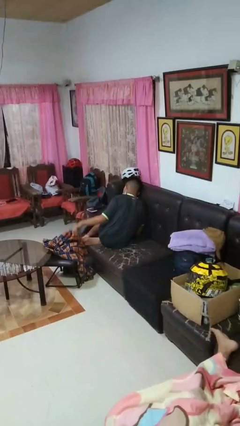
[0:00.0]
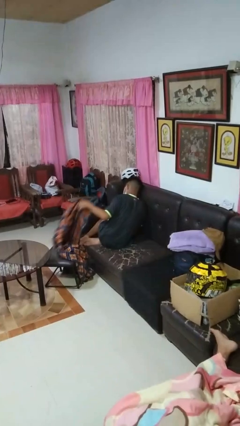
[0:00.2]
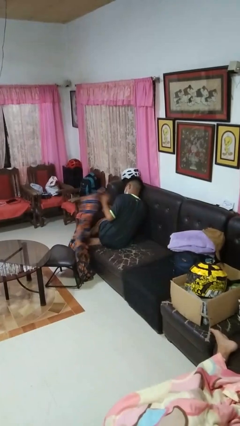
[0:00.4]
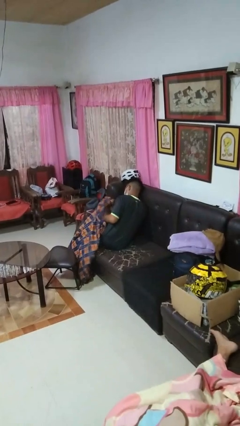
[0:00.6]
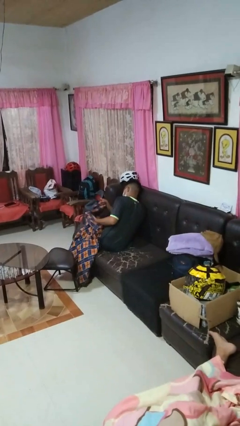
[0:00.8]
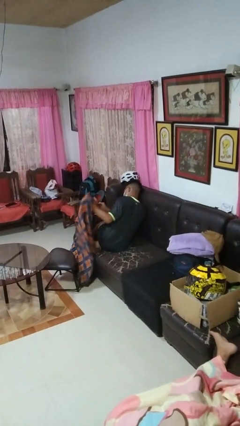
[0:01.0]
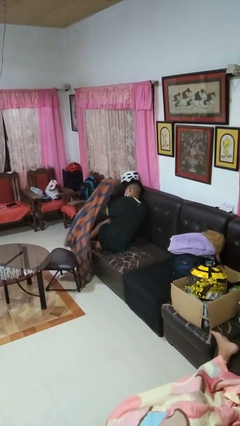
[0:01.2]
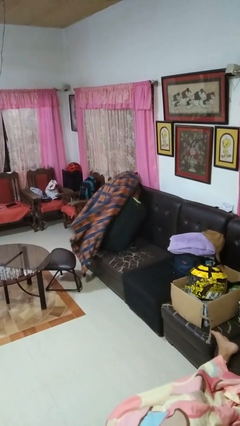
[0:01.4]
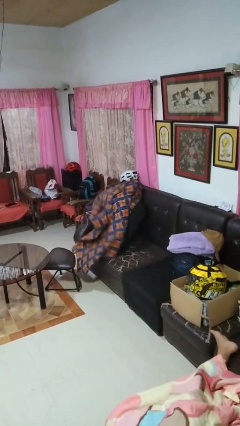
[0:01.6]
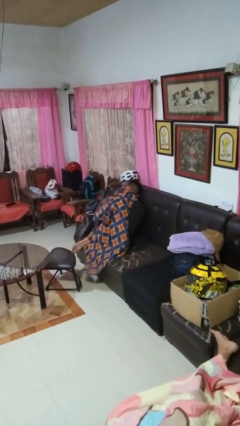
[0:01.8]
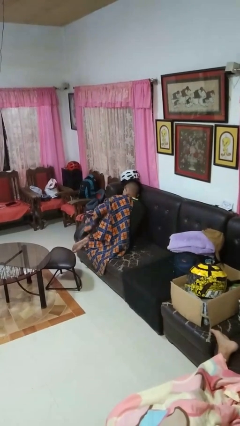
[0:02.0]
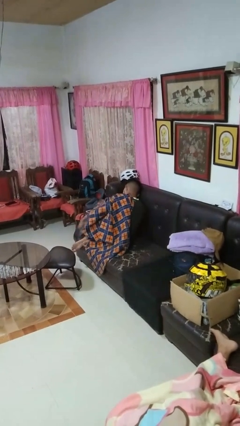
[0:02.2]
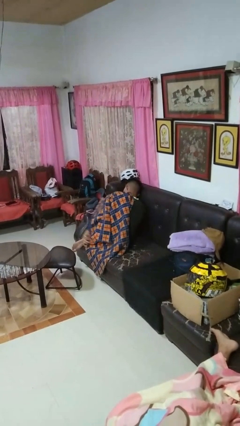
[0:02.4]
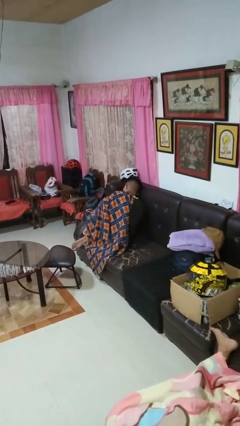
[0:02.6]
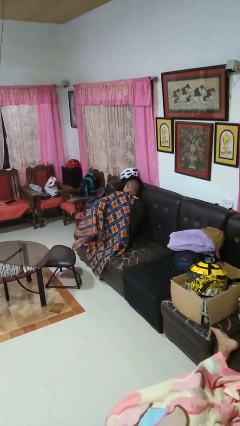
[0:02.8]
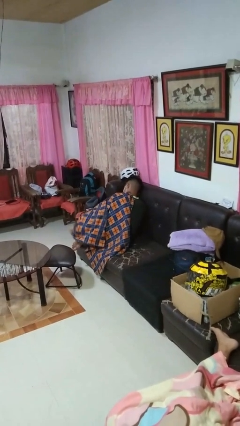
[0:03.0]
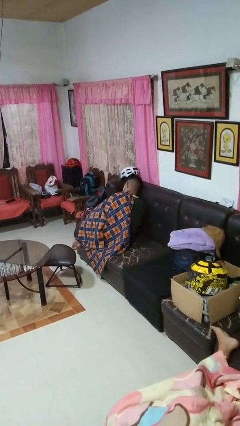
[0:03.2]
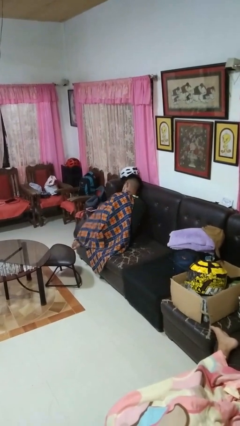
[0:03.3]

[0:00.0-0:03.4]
person covers with blanket

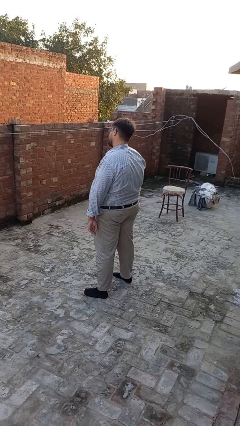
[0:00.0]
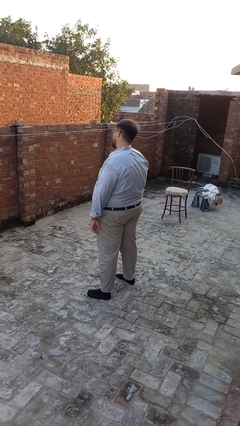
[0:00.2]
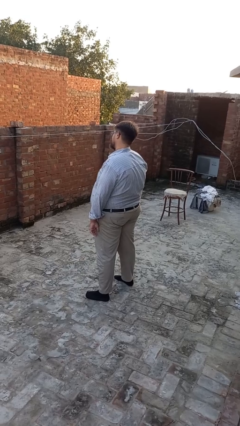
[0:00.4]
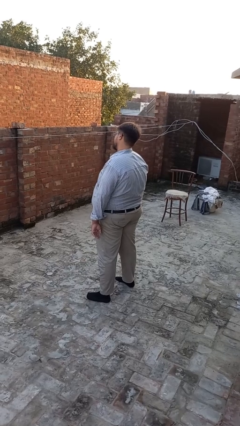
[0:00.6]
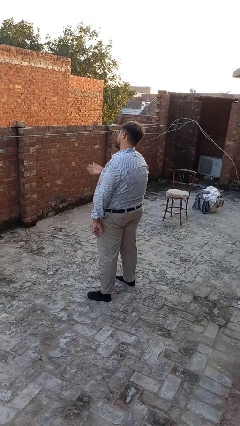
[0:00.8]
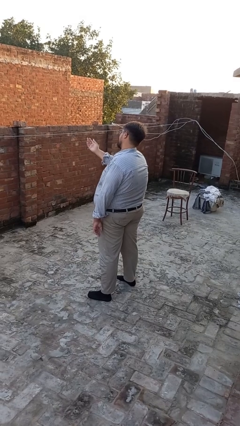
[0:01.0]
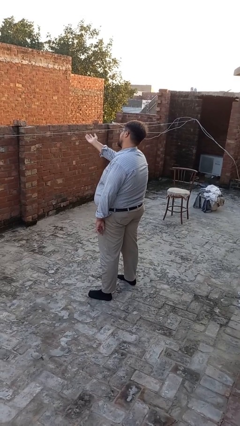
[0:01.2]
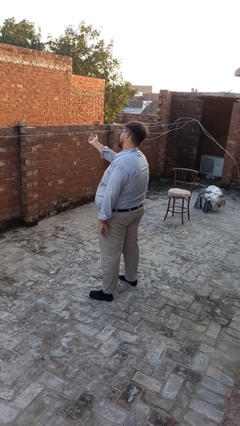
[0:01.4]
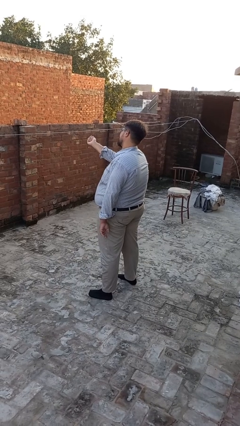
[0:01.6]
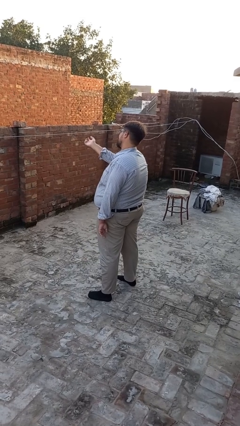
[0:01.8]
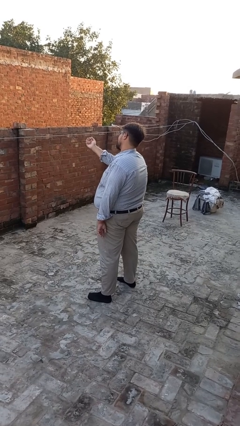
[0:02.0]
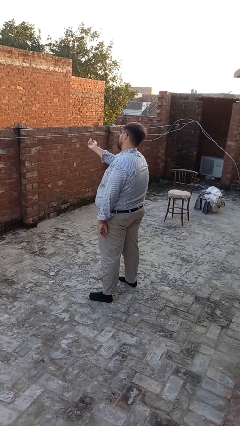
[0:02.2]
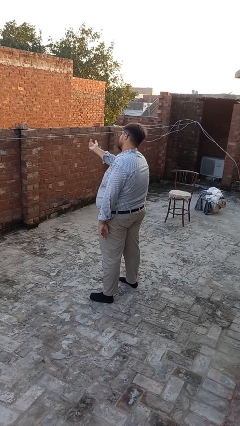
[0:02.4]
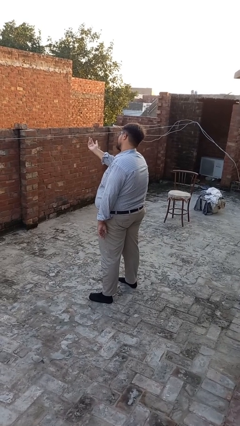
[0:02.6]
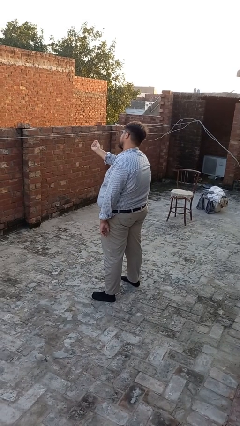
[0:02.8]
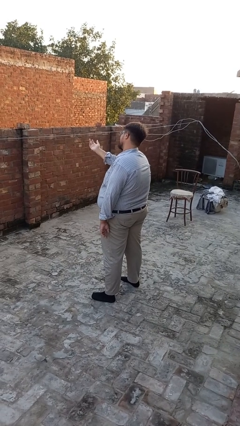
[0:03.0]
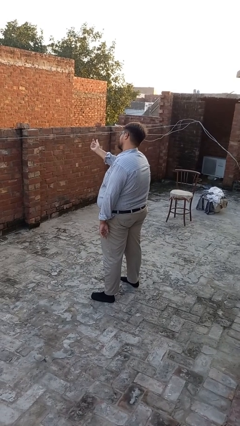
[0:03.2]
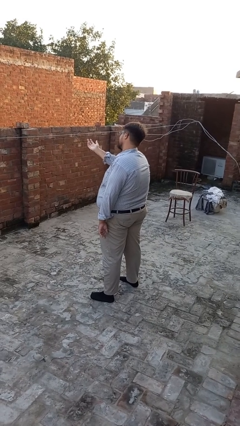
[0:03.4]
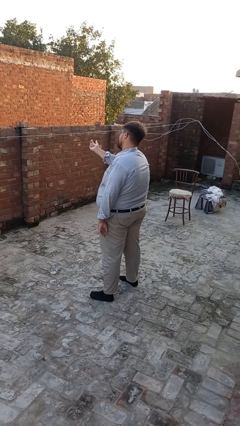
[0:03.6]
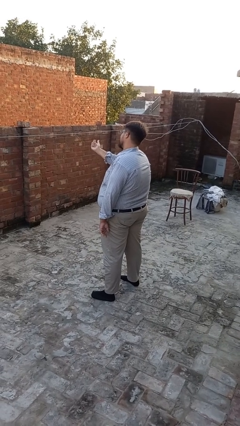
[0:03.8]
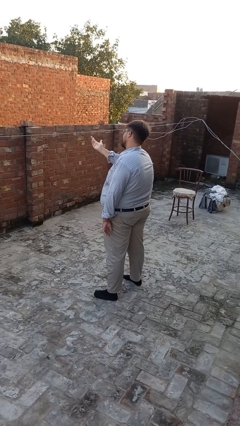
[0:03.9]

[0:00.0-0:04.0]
person gestures come here

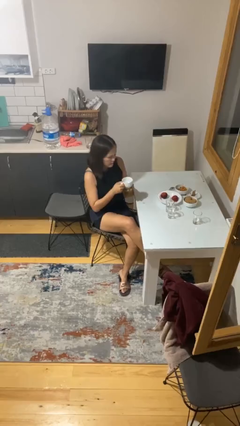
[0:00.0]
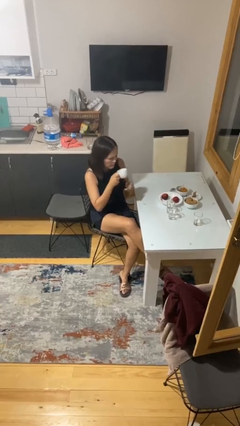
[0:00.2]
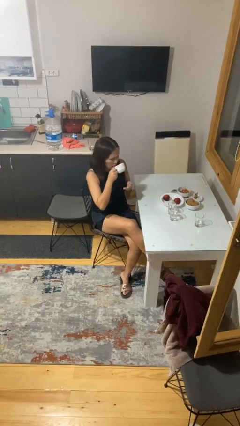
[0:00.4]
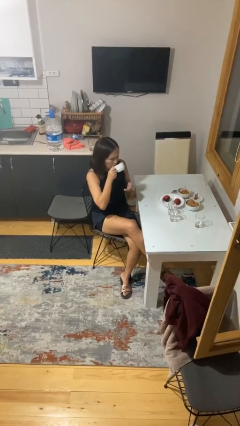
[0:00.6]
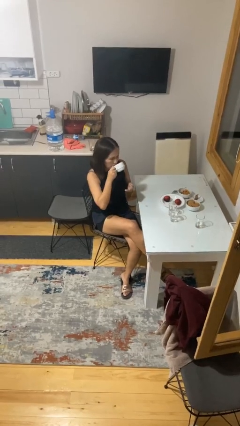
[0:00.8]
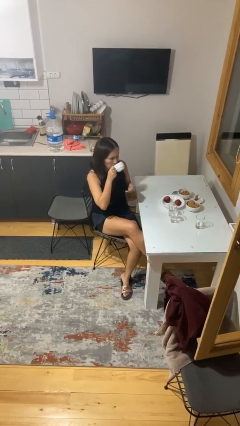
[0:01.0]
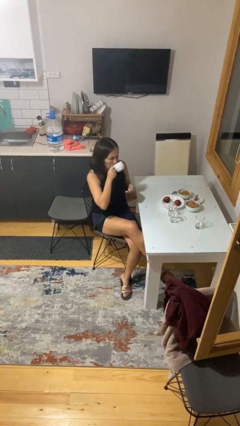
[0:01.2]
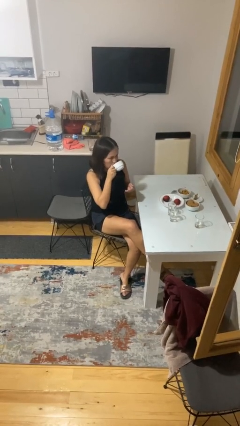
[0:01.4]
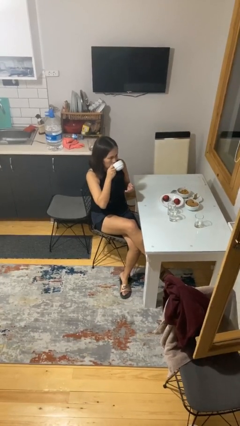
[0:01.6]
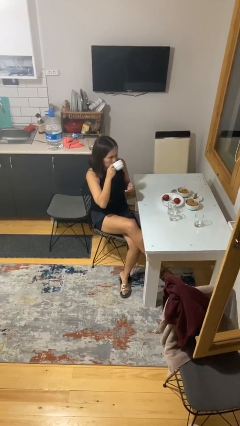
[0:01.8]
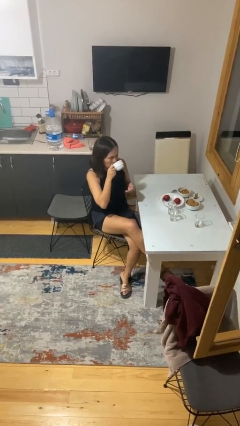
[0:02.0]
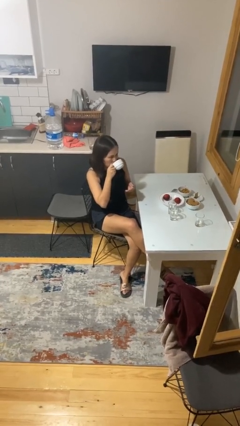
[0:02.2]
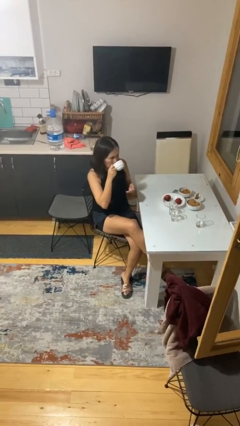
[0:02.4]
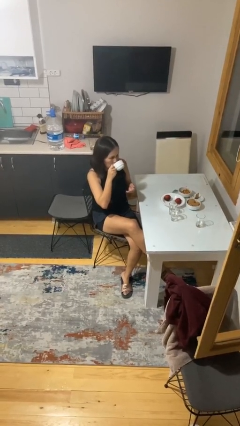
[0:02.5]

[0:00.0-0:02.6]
person drinks from mug

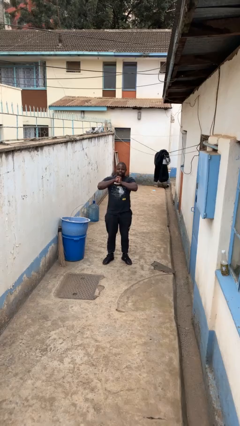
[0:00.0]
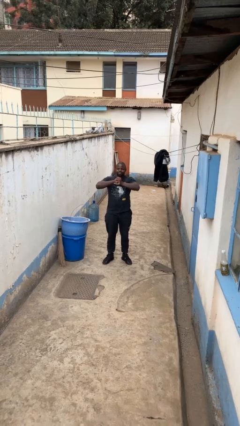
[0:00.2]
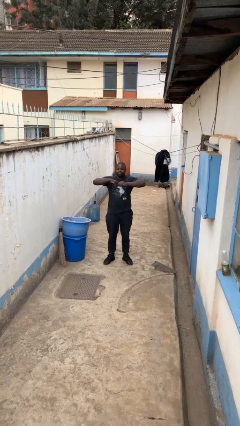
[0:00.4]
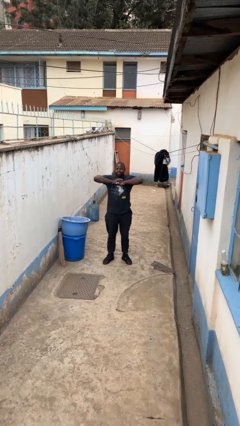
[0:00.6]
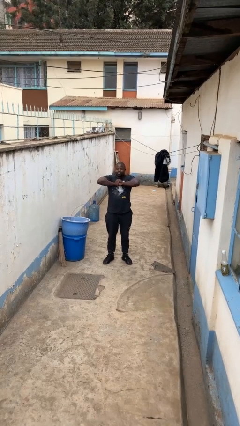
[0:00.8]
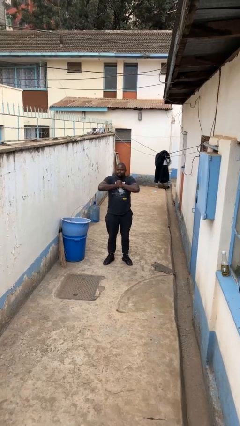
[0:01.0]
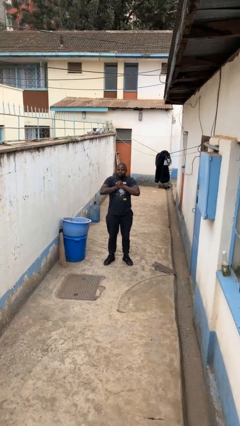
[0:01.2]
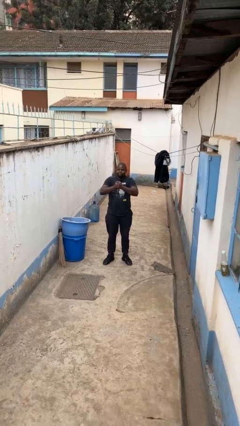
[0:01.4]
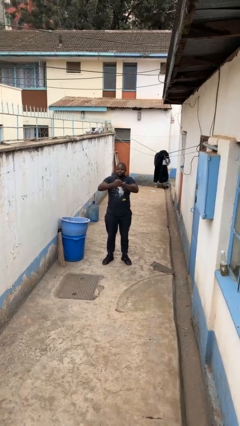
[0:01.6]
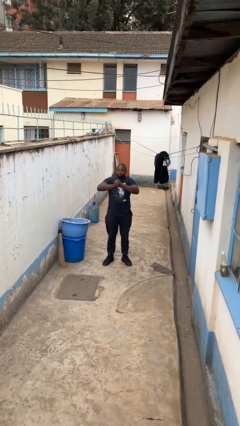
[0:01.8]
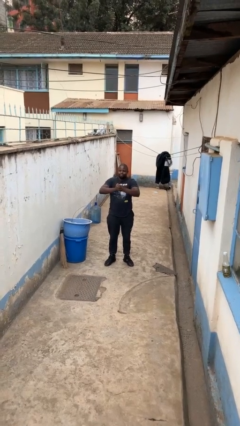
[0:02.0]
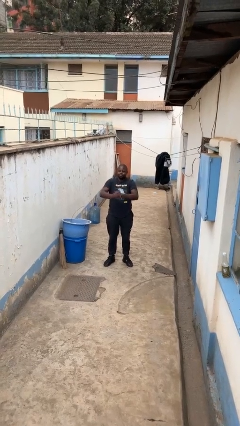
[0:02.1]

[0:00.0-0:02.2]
person cracks knuckles

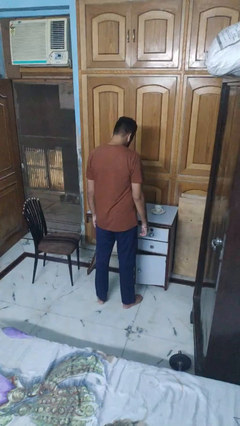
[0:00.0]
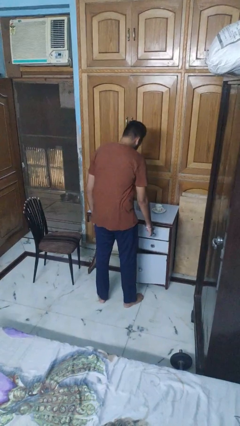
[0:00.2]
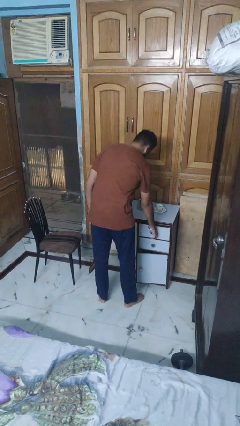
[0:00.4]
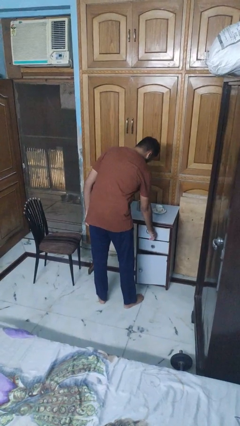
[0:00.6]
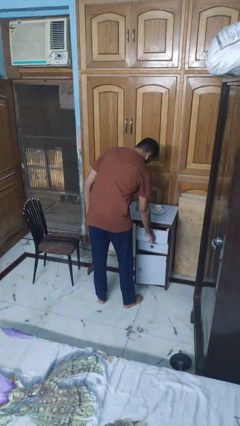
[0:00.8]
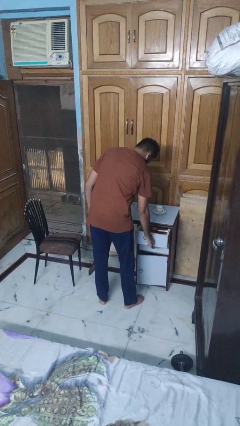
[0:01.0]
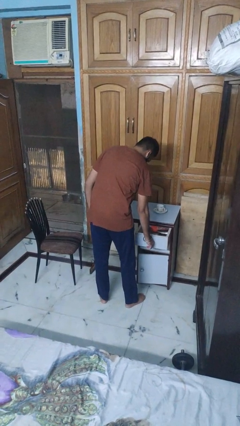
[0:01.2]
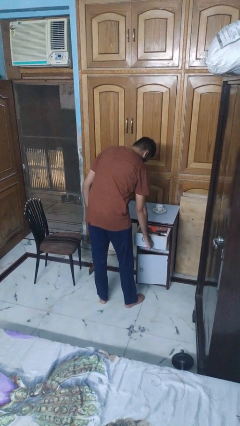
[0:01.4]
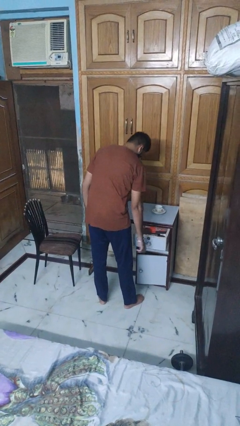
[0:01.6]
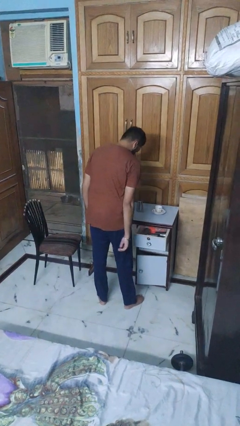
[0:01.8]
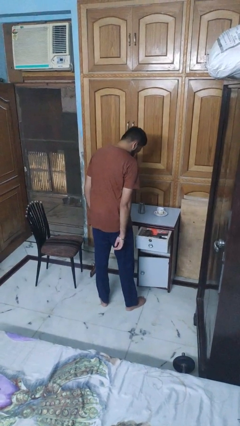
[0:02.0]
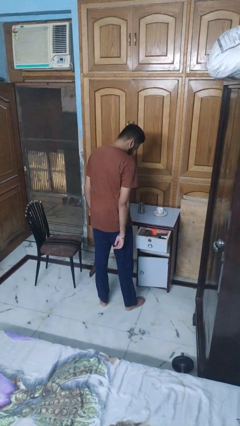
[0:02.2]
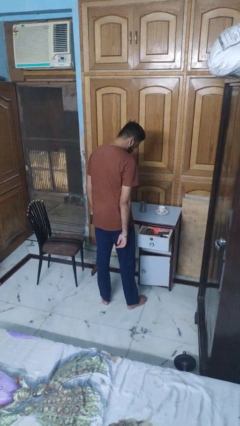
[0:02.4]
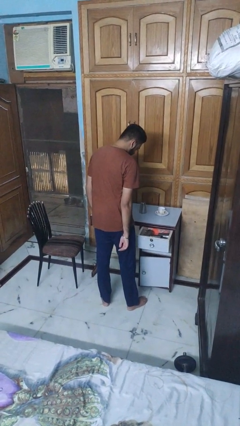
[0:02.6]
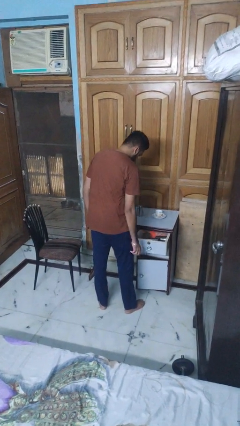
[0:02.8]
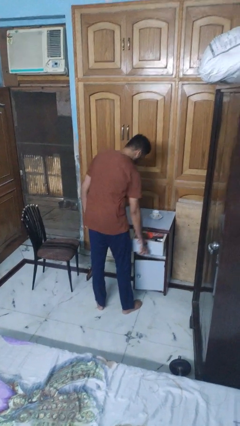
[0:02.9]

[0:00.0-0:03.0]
person opens kitchen drawer

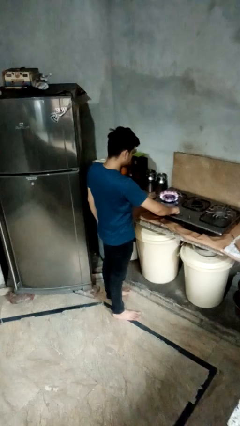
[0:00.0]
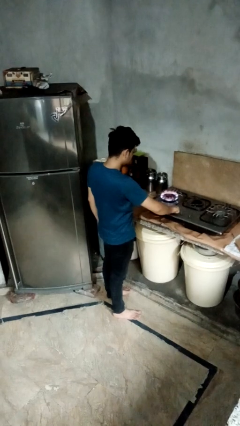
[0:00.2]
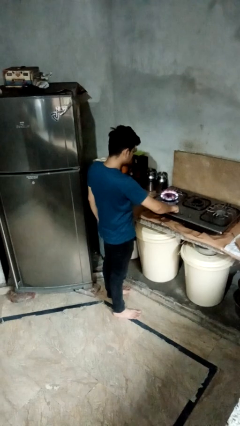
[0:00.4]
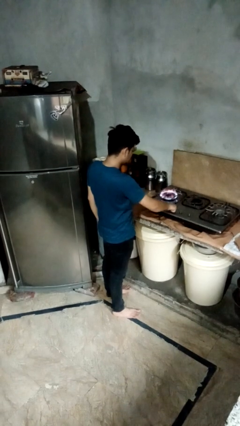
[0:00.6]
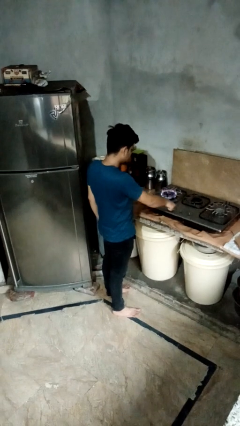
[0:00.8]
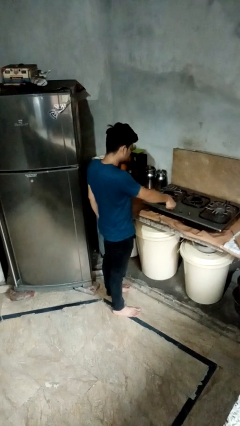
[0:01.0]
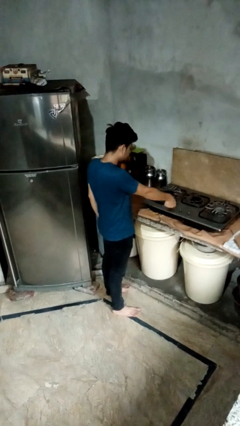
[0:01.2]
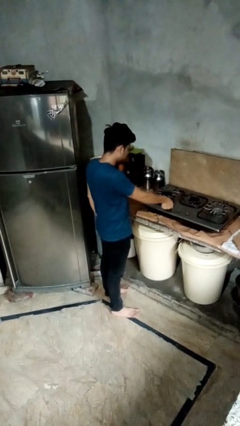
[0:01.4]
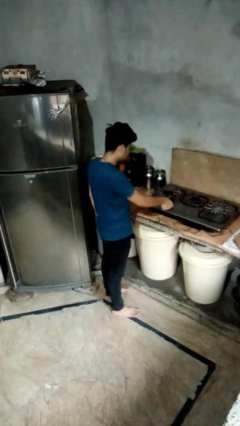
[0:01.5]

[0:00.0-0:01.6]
person turns off stovetop
